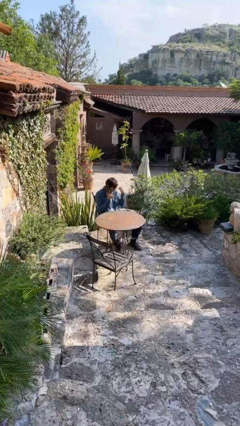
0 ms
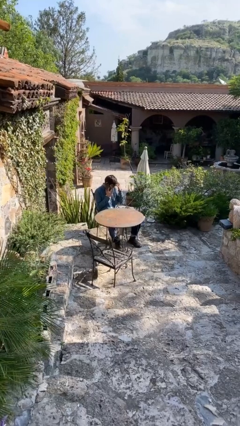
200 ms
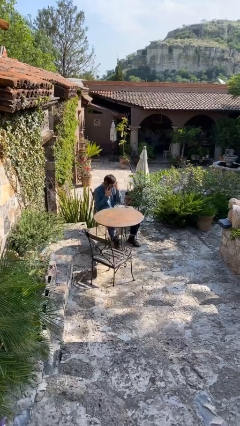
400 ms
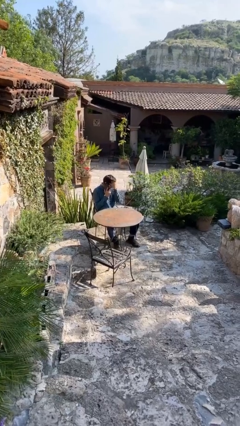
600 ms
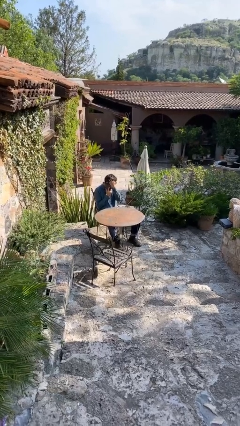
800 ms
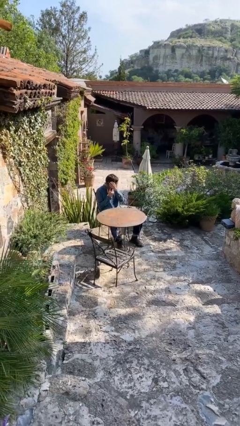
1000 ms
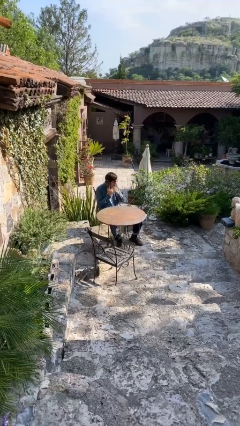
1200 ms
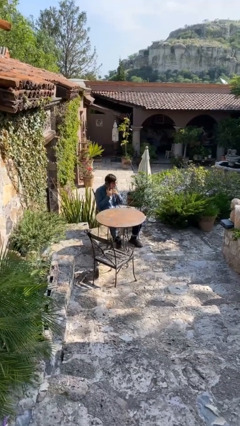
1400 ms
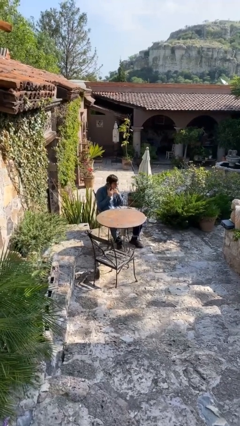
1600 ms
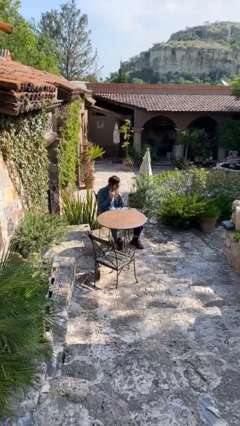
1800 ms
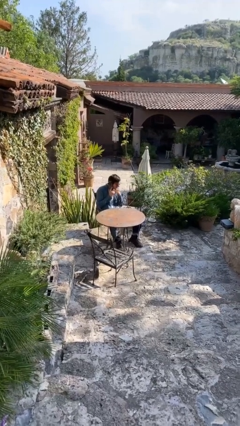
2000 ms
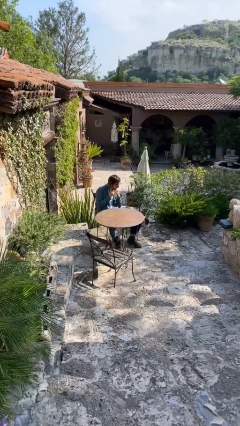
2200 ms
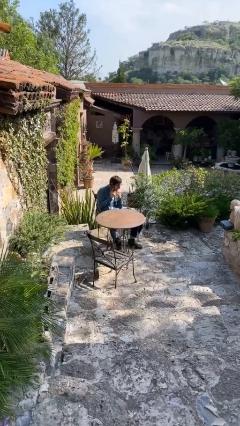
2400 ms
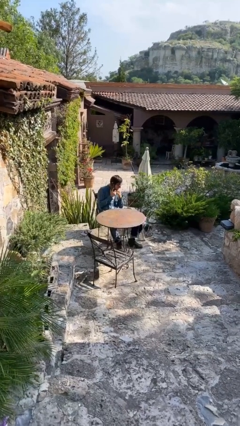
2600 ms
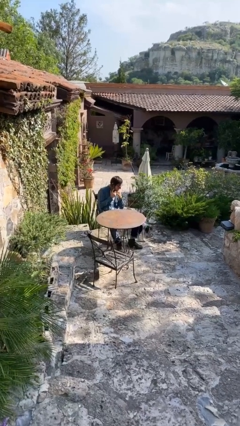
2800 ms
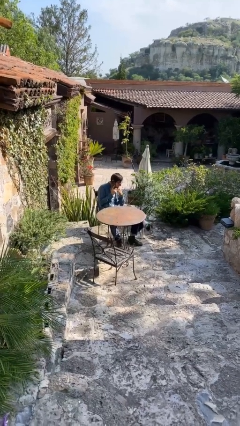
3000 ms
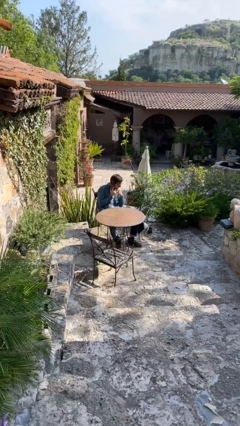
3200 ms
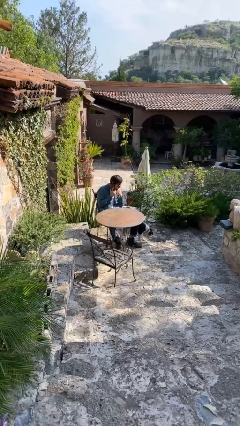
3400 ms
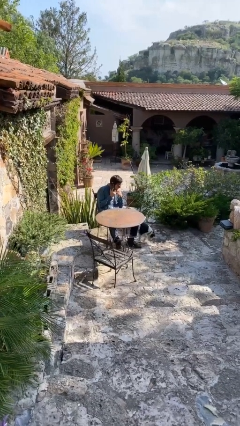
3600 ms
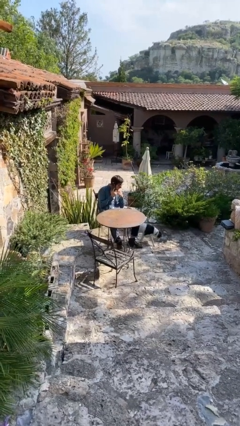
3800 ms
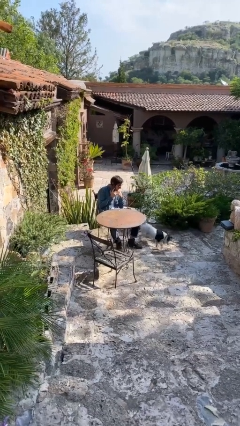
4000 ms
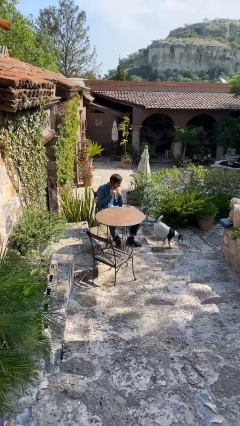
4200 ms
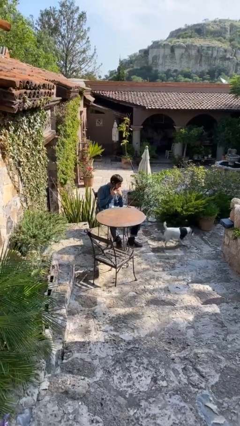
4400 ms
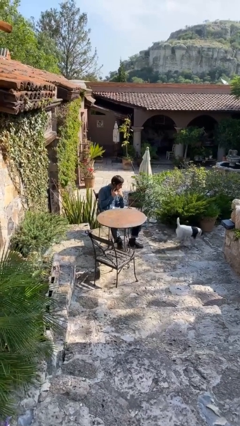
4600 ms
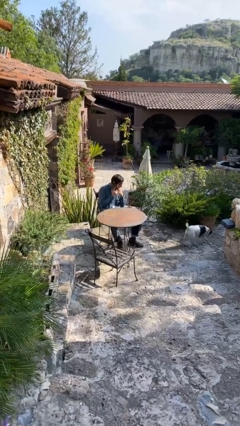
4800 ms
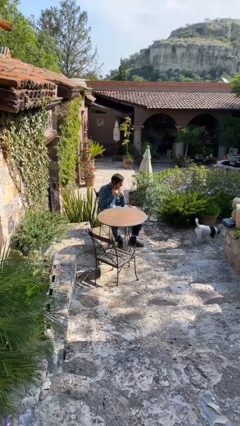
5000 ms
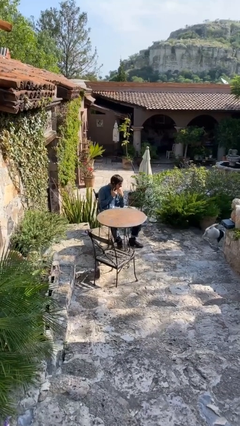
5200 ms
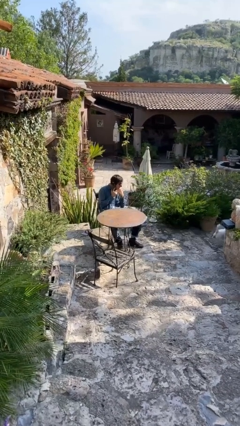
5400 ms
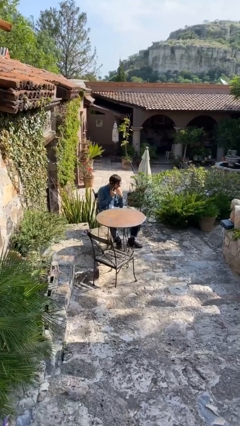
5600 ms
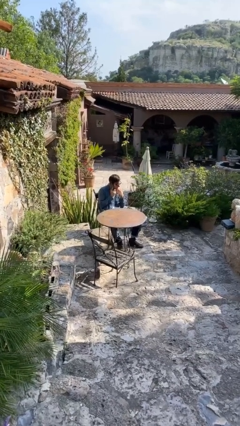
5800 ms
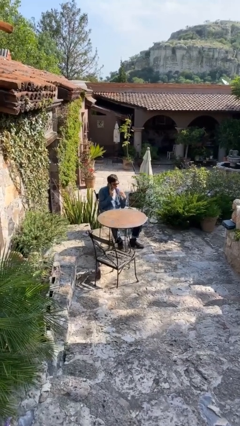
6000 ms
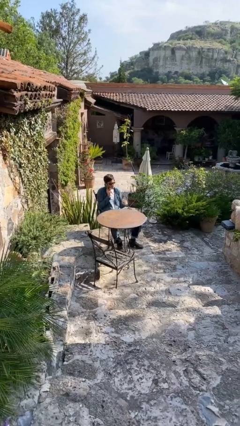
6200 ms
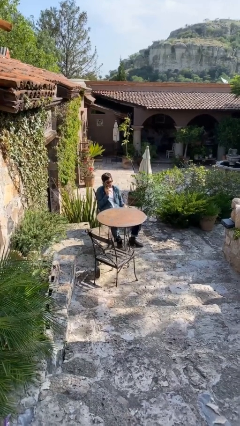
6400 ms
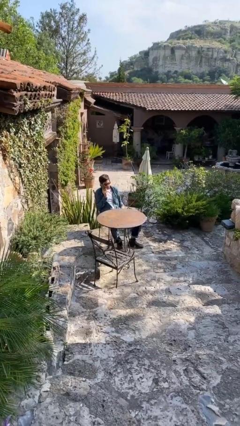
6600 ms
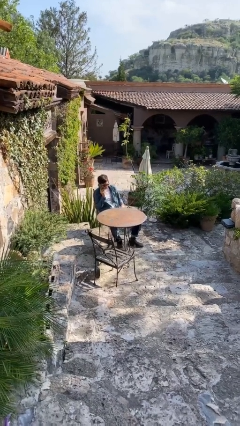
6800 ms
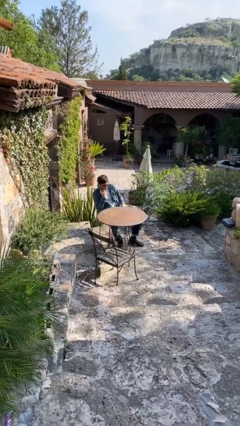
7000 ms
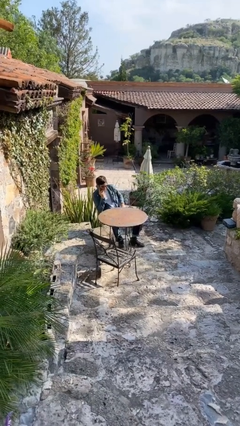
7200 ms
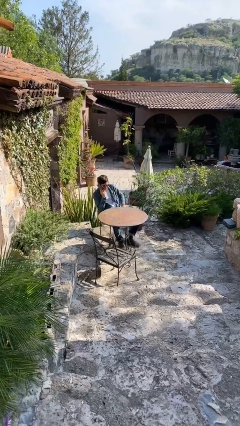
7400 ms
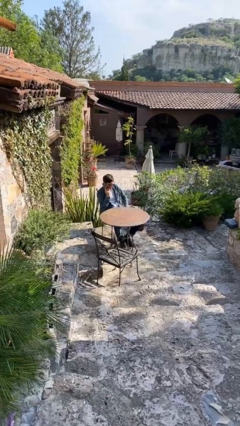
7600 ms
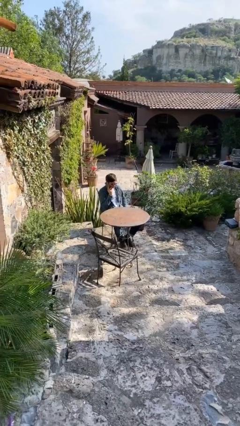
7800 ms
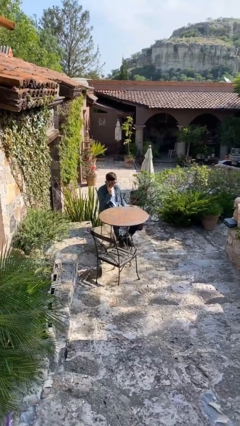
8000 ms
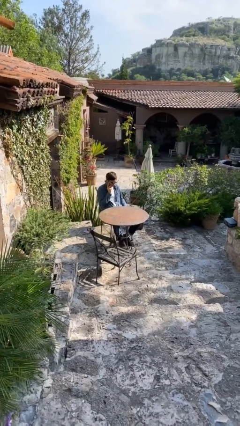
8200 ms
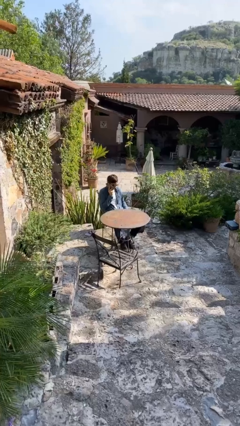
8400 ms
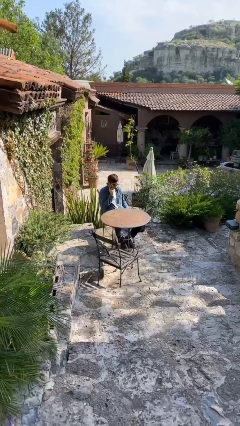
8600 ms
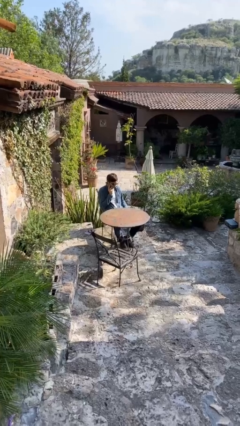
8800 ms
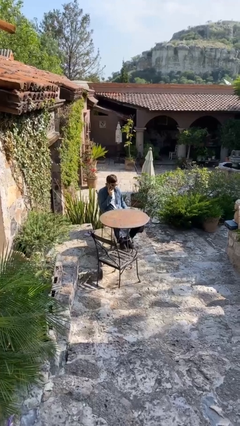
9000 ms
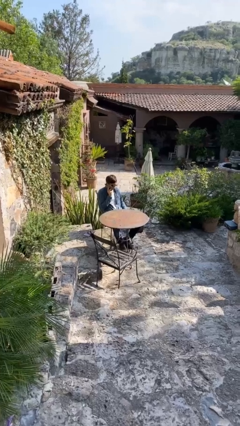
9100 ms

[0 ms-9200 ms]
person talks on phone

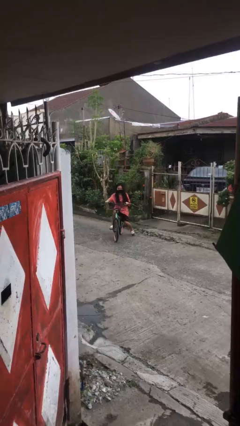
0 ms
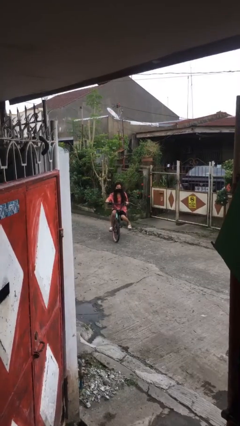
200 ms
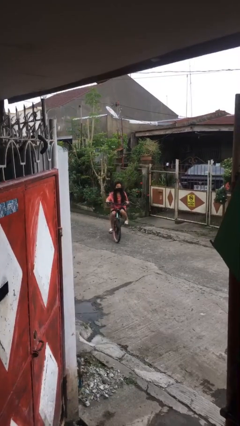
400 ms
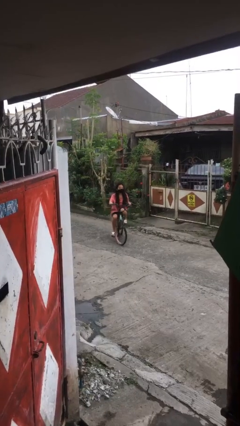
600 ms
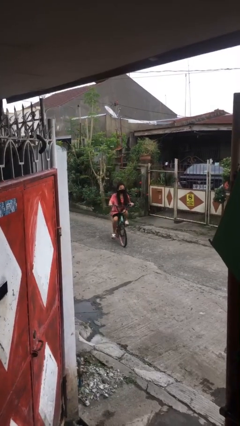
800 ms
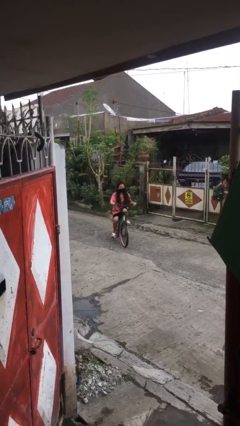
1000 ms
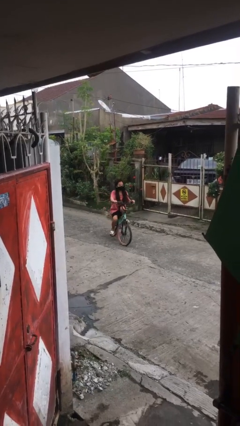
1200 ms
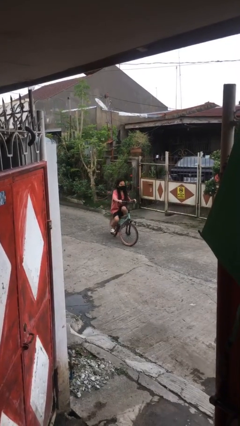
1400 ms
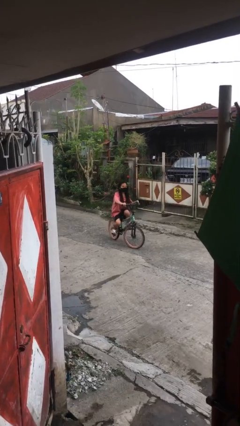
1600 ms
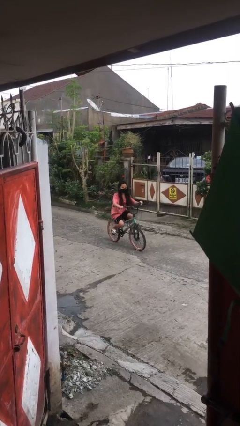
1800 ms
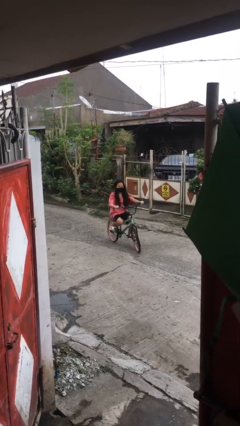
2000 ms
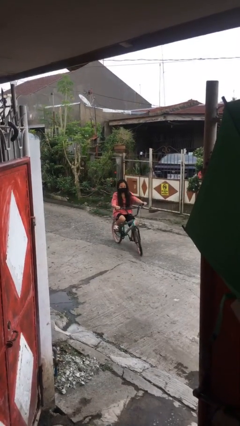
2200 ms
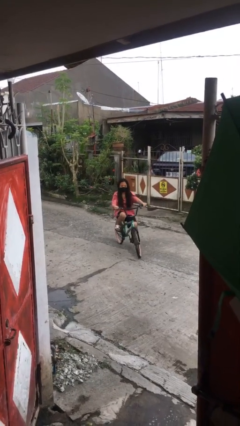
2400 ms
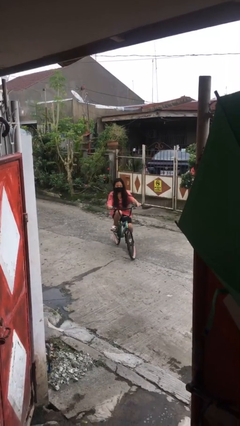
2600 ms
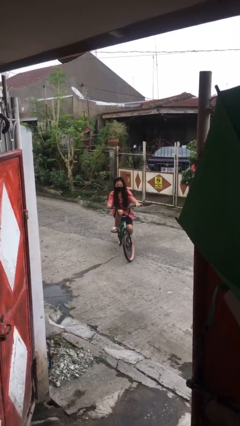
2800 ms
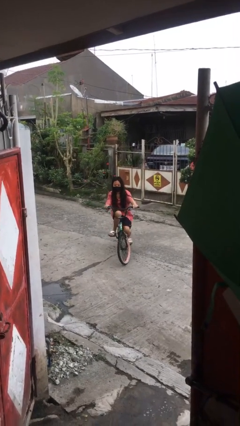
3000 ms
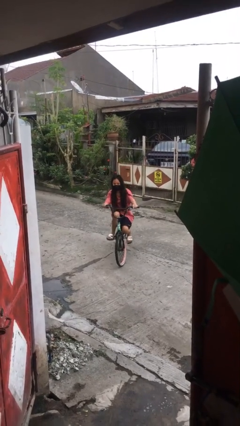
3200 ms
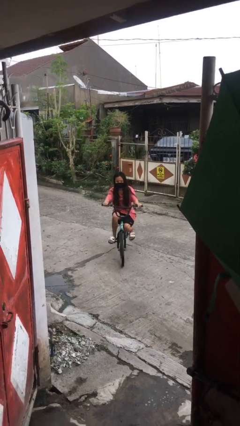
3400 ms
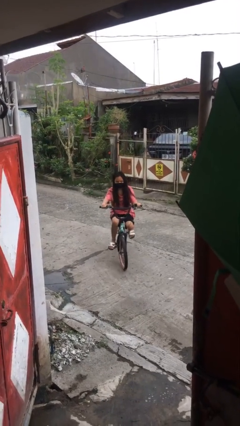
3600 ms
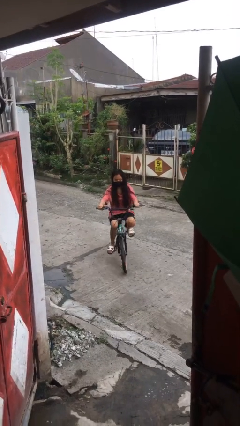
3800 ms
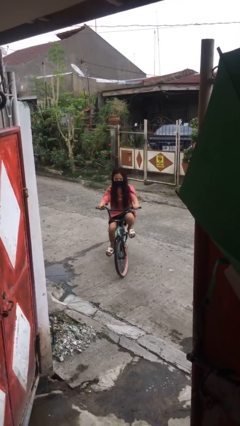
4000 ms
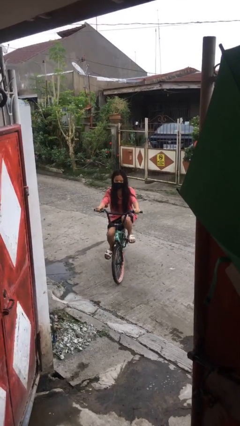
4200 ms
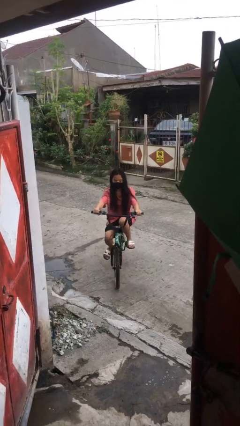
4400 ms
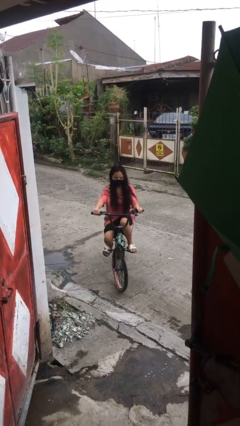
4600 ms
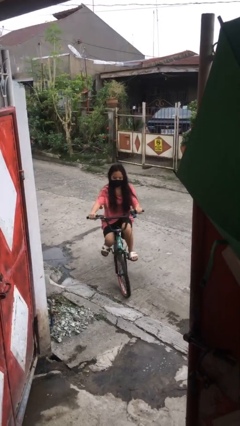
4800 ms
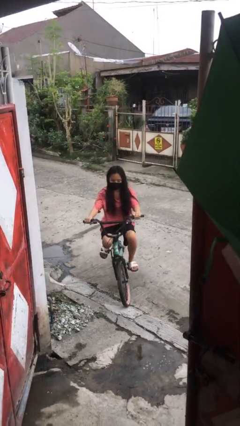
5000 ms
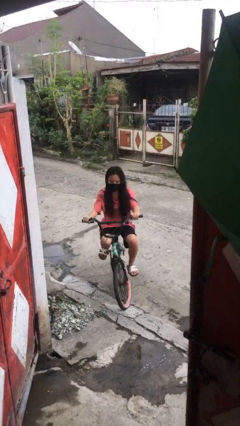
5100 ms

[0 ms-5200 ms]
person rides bicycle

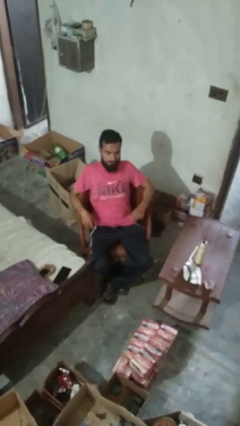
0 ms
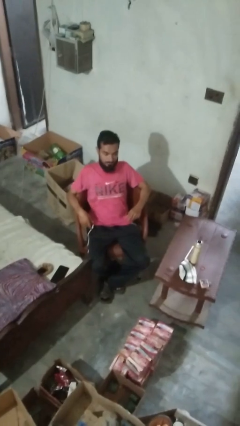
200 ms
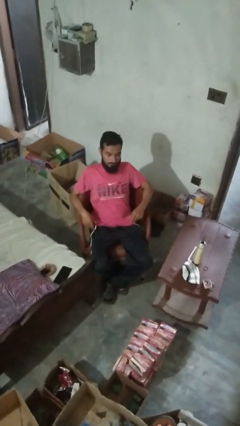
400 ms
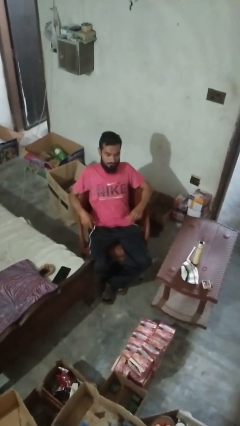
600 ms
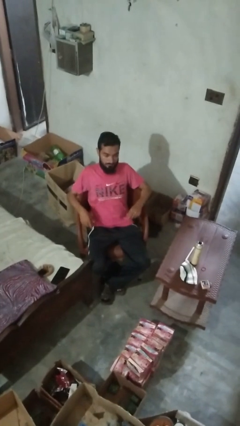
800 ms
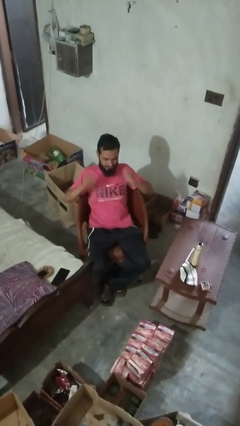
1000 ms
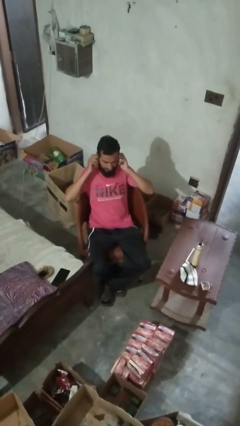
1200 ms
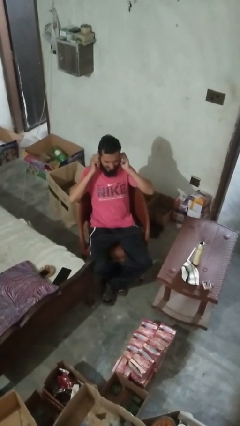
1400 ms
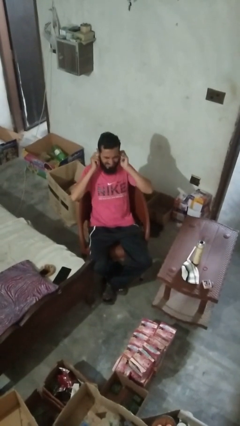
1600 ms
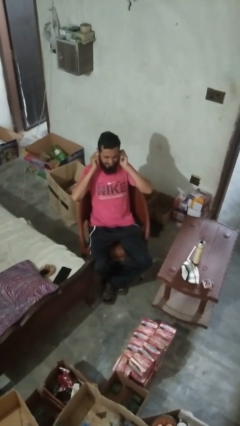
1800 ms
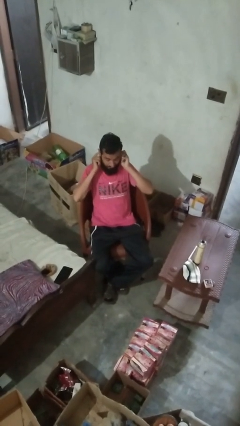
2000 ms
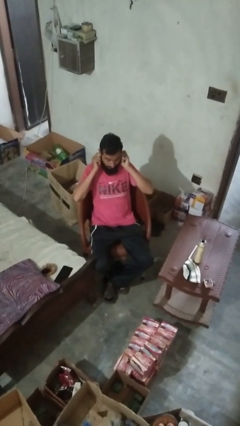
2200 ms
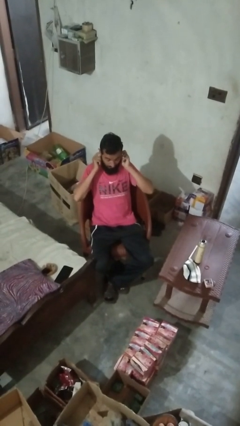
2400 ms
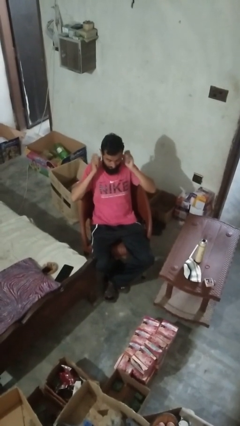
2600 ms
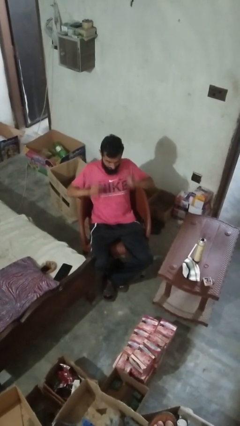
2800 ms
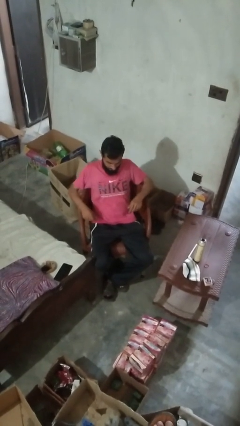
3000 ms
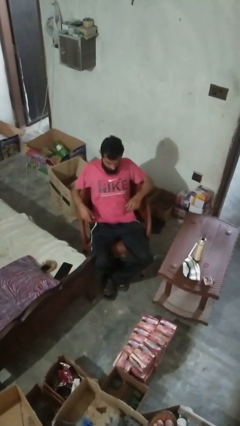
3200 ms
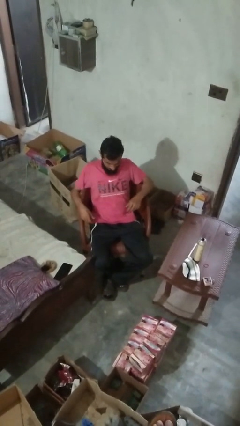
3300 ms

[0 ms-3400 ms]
person puts fingers in ear
